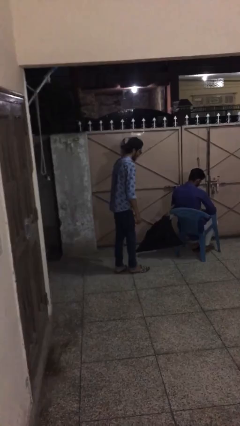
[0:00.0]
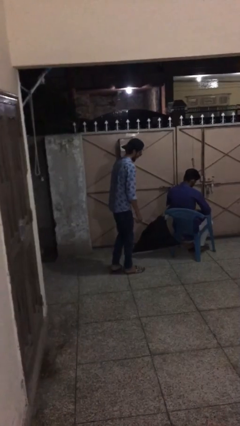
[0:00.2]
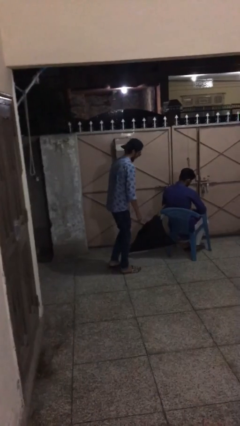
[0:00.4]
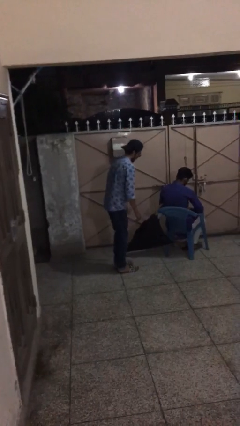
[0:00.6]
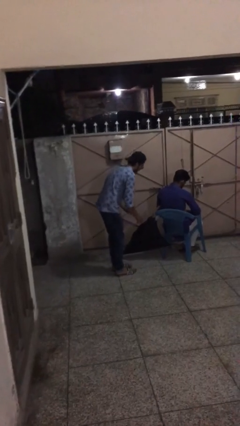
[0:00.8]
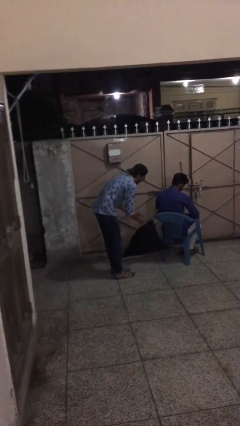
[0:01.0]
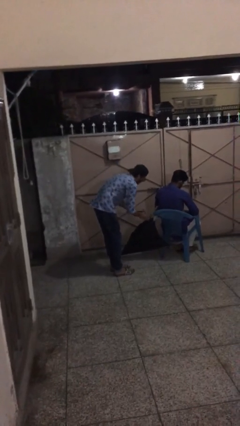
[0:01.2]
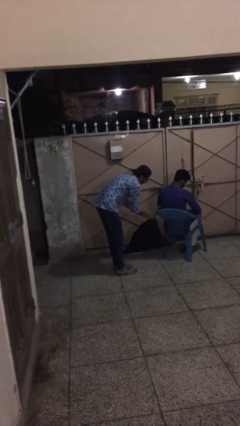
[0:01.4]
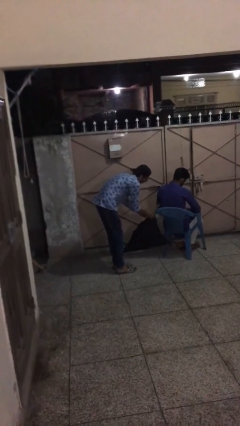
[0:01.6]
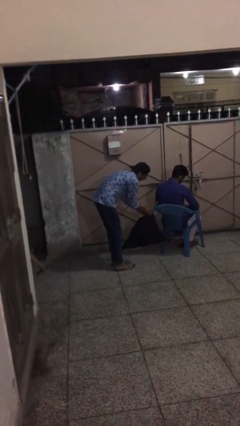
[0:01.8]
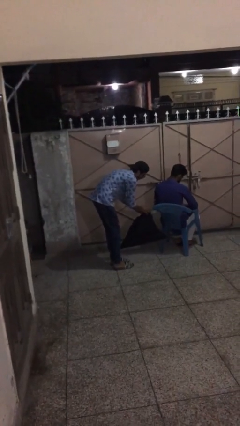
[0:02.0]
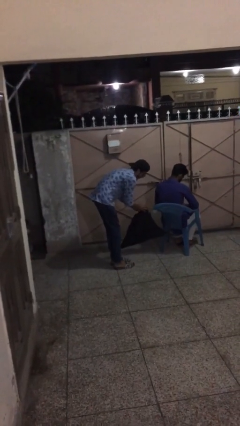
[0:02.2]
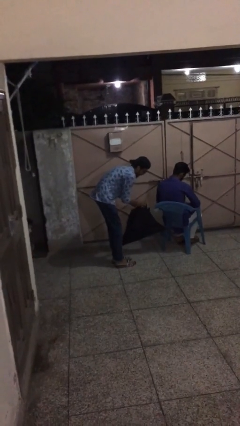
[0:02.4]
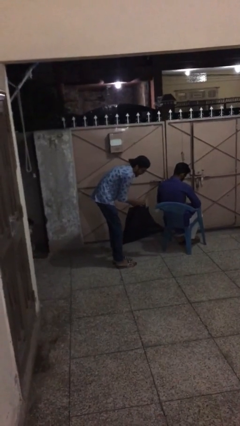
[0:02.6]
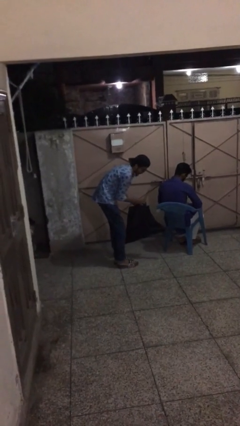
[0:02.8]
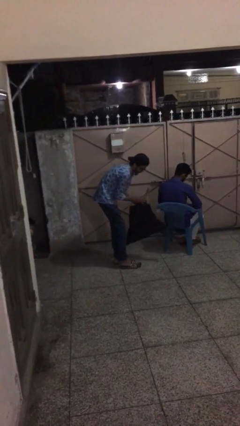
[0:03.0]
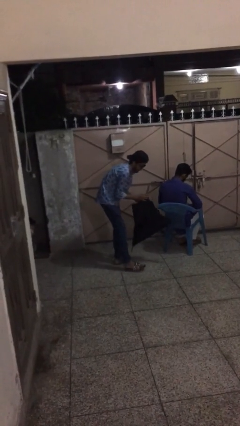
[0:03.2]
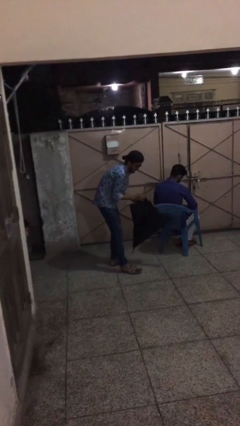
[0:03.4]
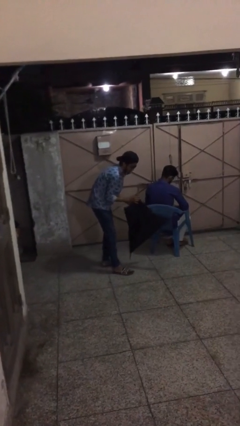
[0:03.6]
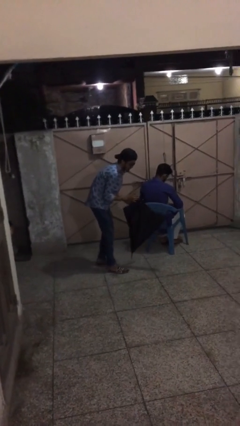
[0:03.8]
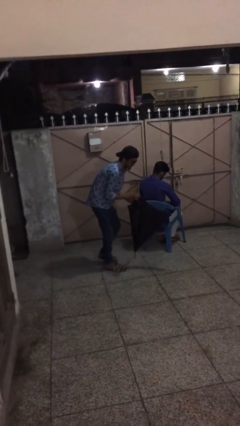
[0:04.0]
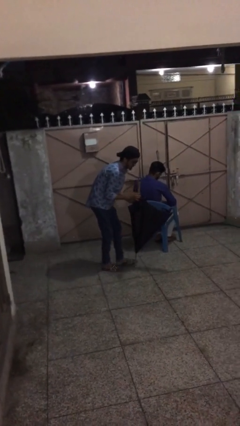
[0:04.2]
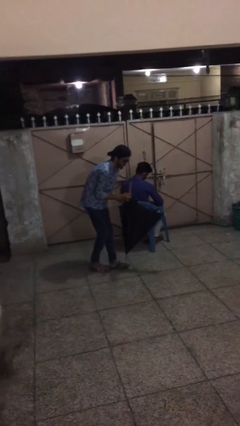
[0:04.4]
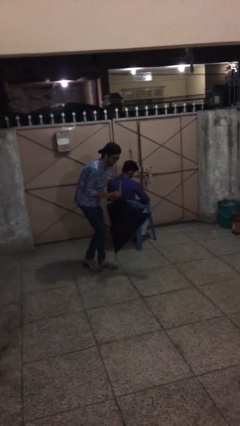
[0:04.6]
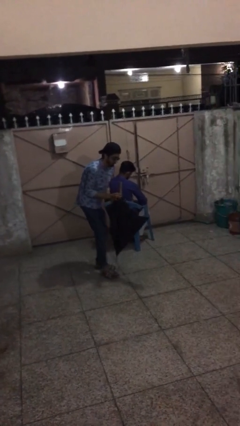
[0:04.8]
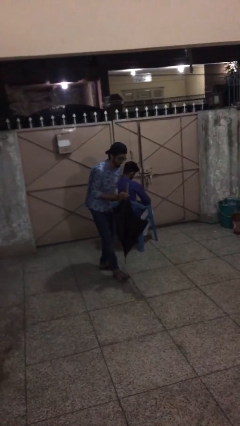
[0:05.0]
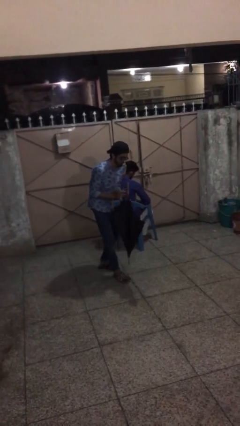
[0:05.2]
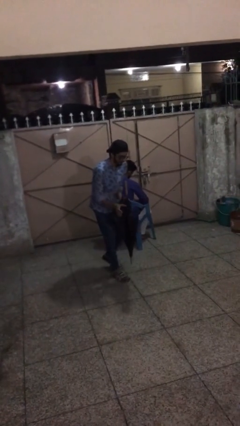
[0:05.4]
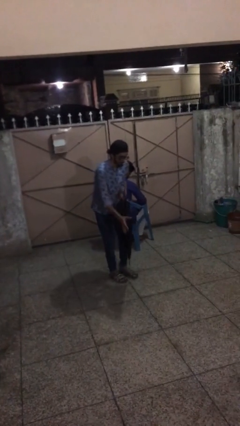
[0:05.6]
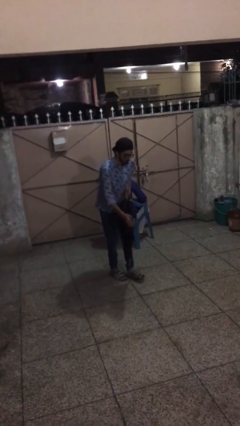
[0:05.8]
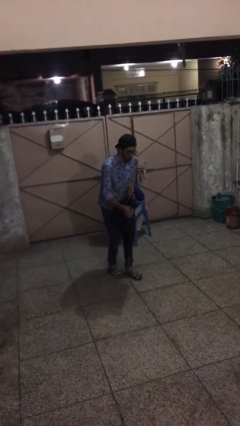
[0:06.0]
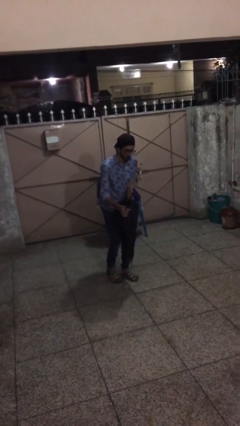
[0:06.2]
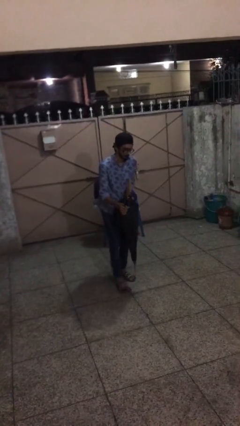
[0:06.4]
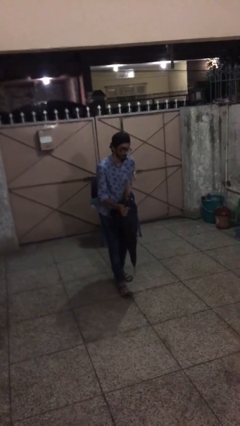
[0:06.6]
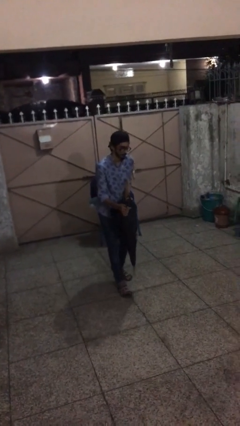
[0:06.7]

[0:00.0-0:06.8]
person steals object from person

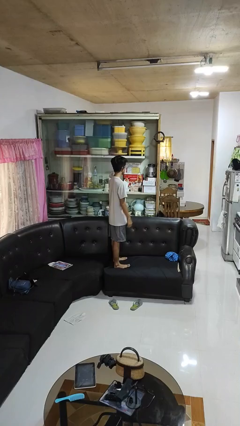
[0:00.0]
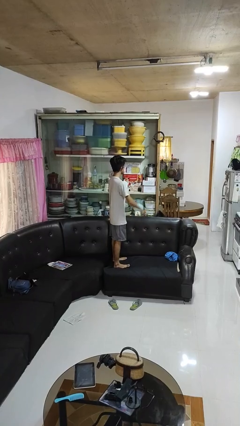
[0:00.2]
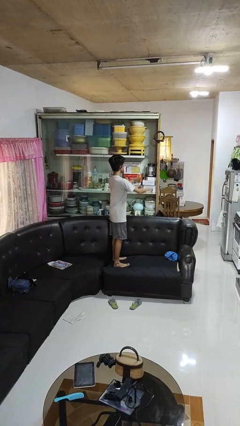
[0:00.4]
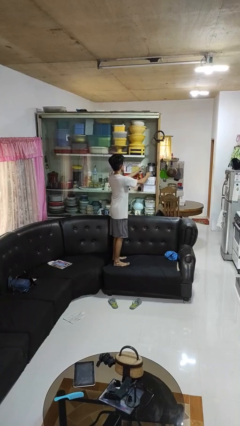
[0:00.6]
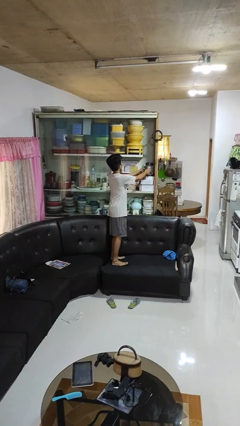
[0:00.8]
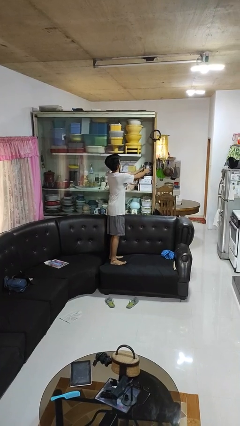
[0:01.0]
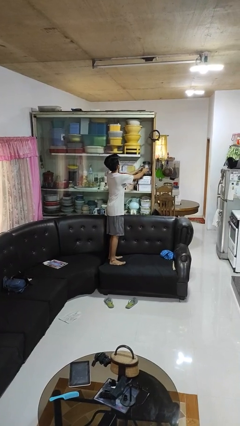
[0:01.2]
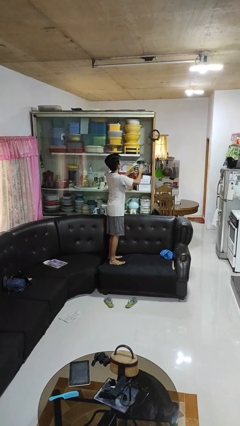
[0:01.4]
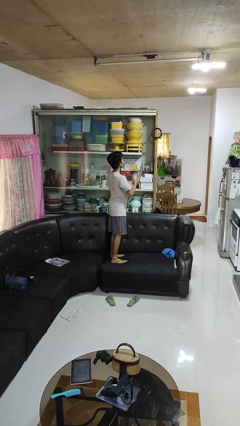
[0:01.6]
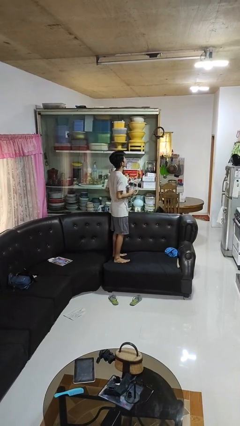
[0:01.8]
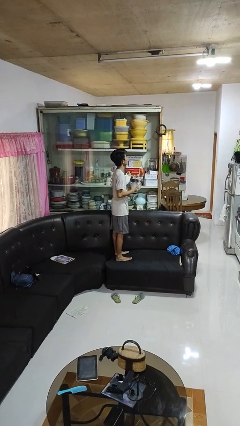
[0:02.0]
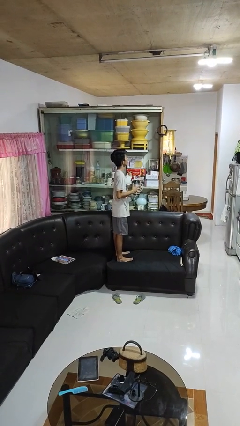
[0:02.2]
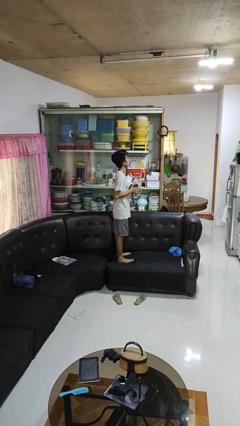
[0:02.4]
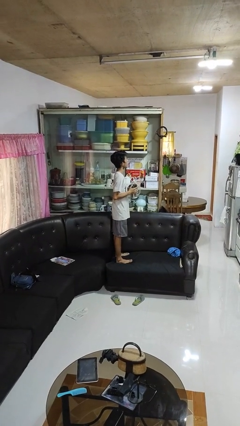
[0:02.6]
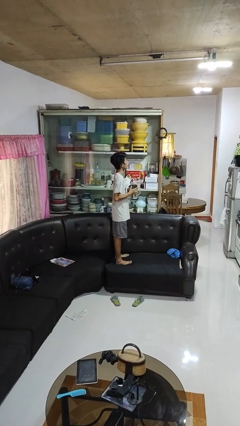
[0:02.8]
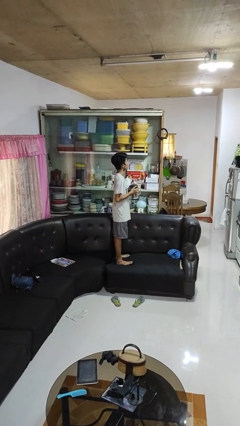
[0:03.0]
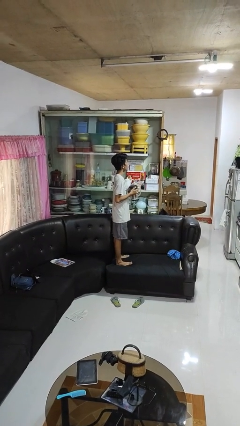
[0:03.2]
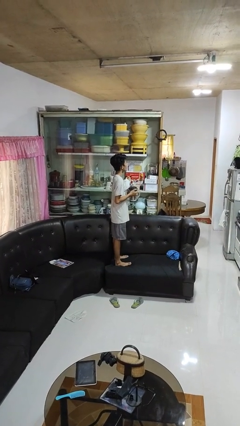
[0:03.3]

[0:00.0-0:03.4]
person picks up object from cabinet

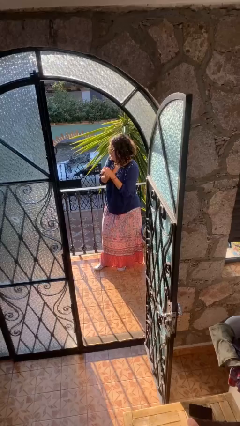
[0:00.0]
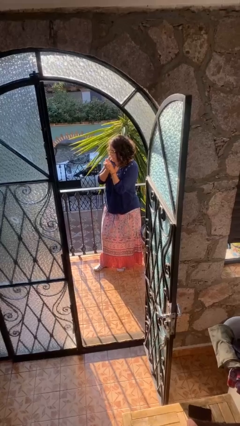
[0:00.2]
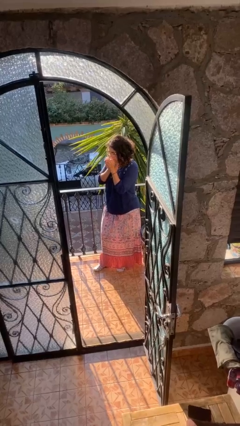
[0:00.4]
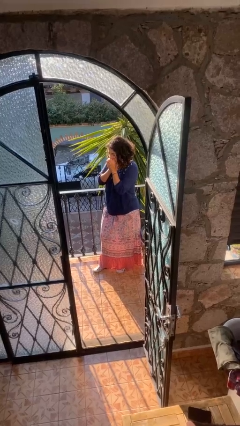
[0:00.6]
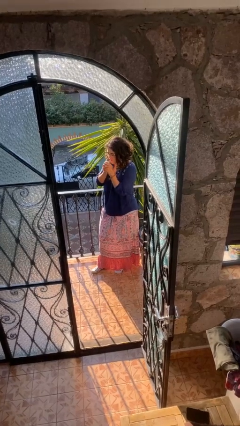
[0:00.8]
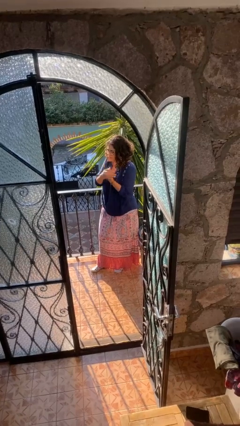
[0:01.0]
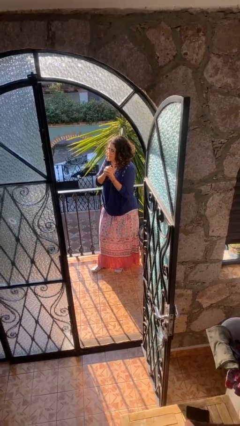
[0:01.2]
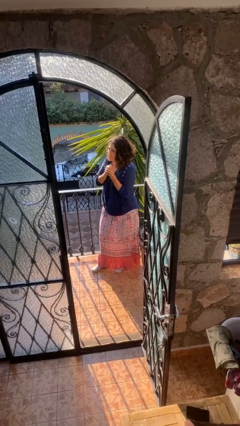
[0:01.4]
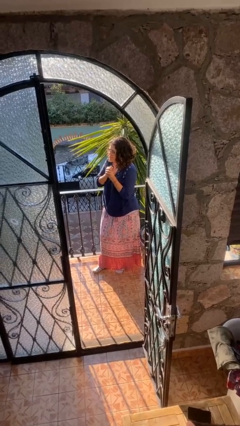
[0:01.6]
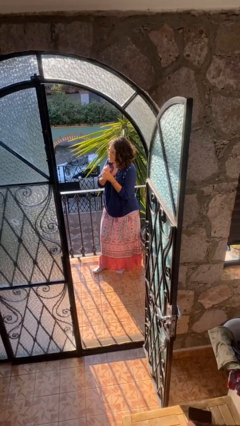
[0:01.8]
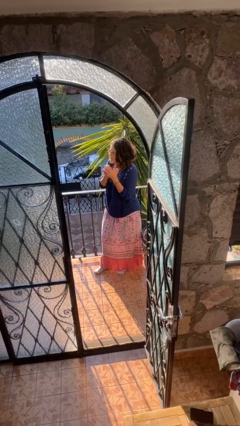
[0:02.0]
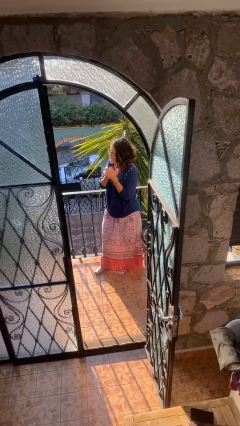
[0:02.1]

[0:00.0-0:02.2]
person blows into hands

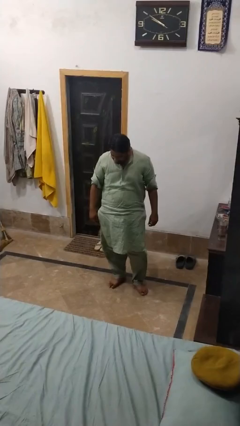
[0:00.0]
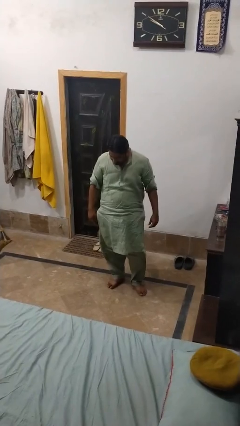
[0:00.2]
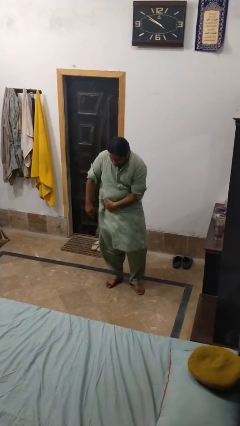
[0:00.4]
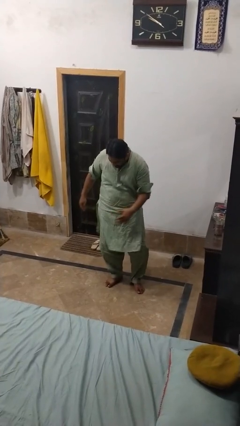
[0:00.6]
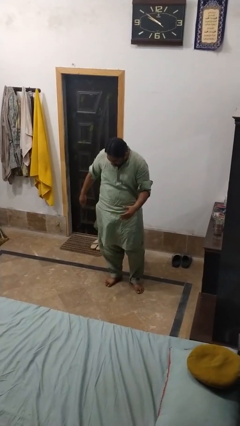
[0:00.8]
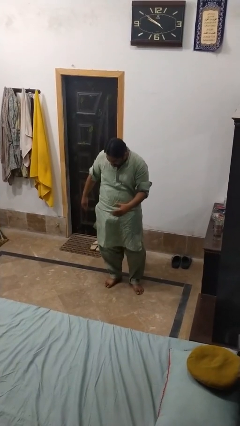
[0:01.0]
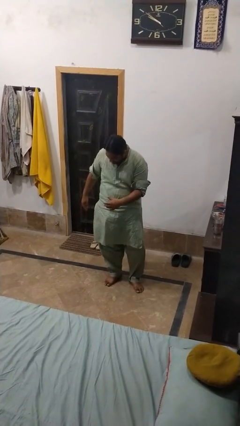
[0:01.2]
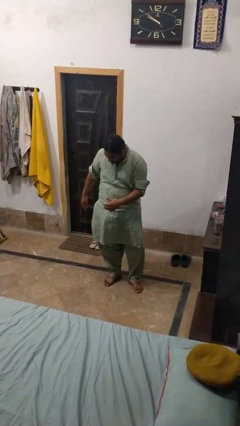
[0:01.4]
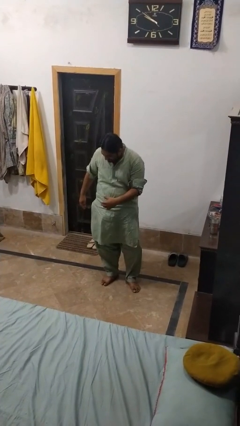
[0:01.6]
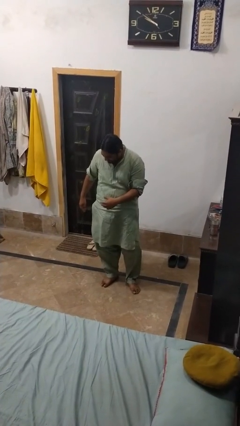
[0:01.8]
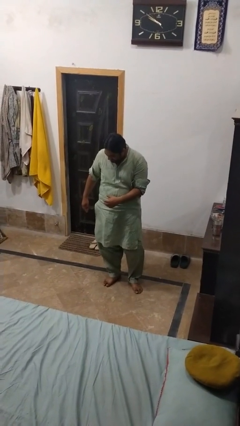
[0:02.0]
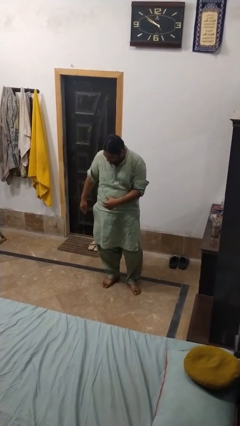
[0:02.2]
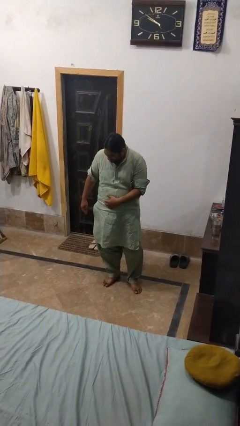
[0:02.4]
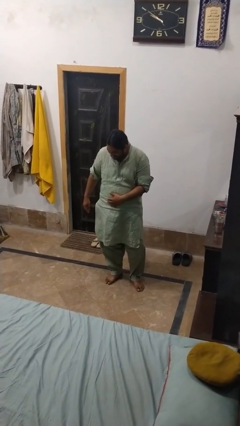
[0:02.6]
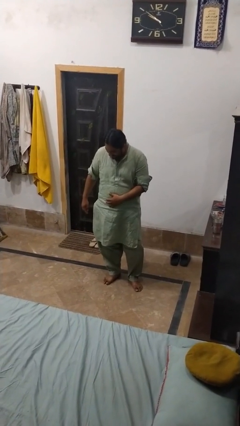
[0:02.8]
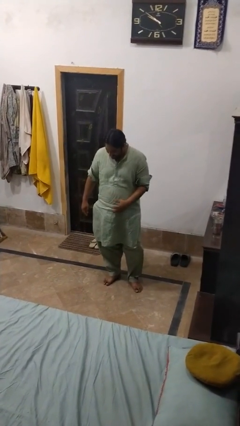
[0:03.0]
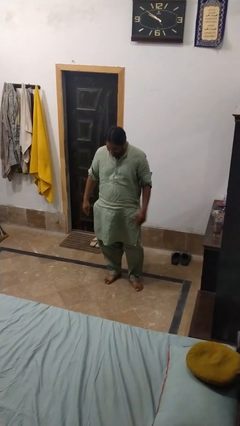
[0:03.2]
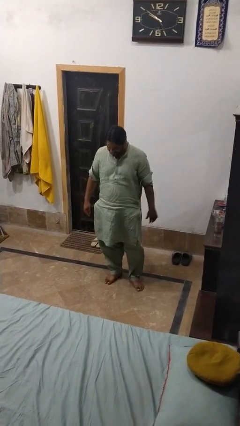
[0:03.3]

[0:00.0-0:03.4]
person swats bug

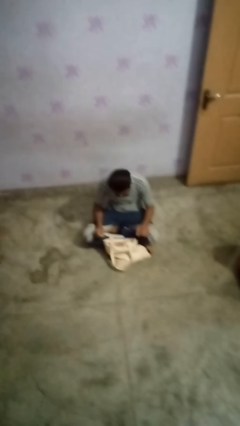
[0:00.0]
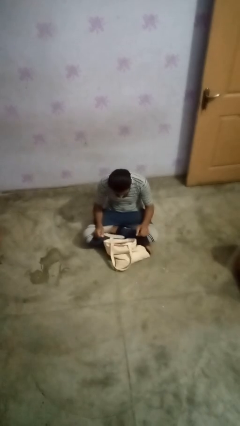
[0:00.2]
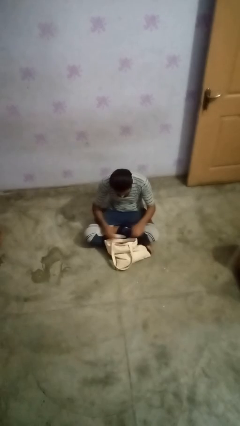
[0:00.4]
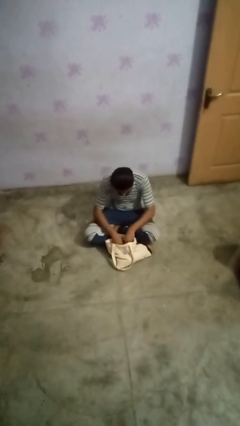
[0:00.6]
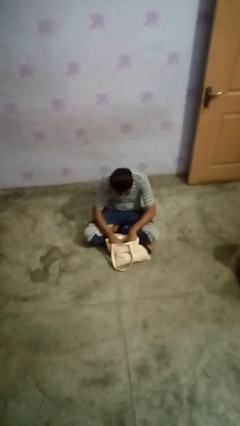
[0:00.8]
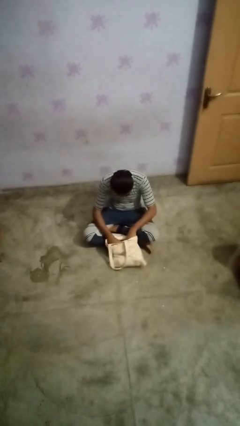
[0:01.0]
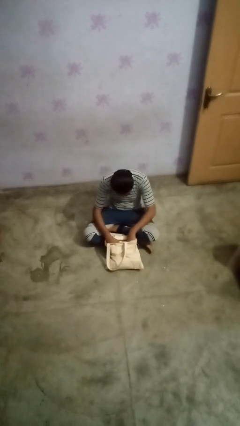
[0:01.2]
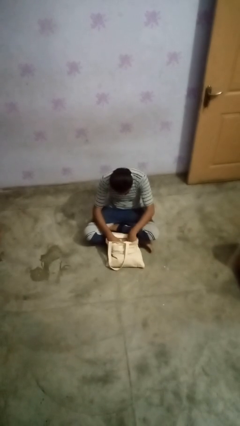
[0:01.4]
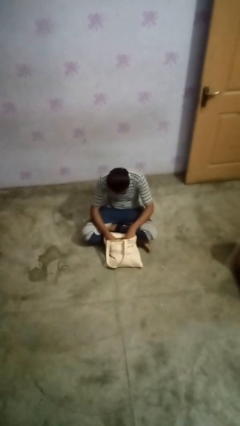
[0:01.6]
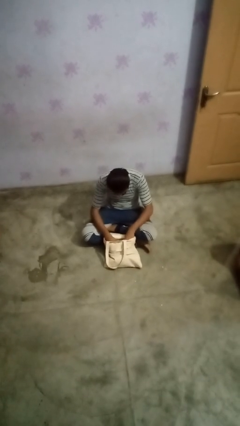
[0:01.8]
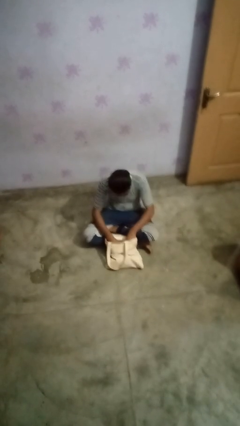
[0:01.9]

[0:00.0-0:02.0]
person searches in bag

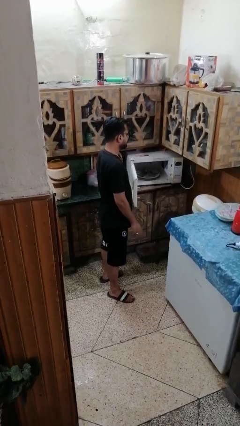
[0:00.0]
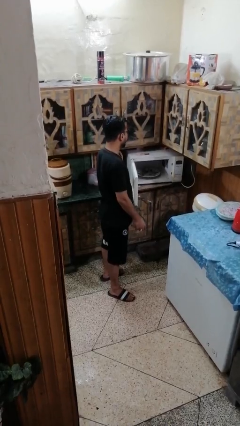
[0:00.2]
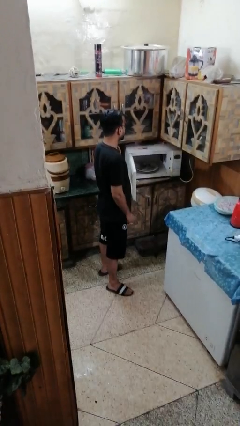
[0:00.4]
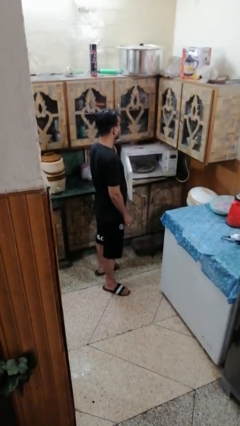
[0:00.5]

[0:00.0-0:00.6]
person takes object from microwave
